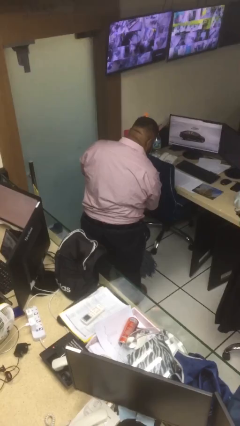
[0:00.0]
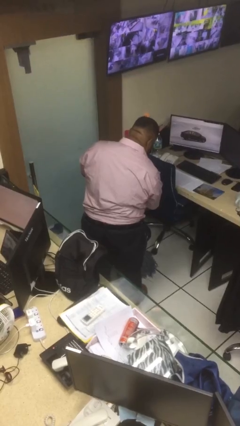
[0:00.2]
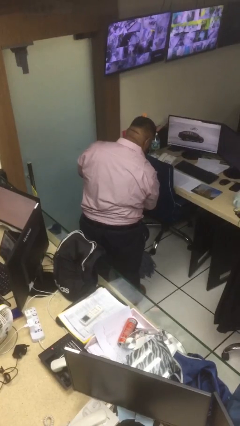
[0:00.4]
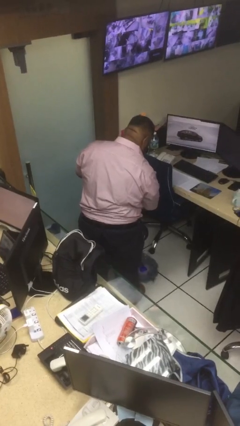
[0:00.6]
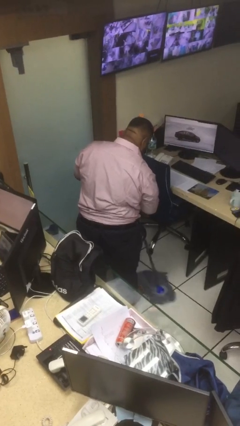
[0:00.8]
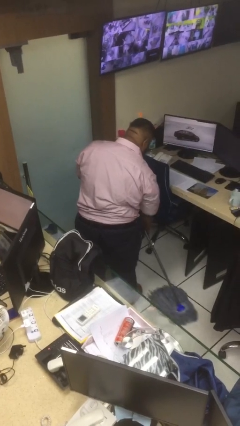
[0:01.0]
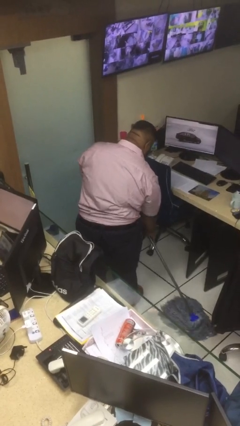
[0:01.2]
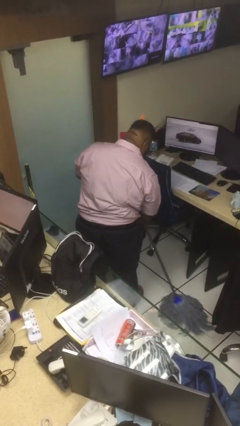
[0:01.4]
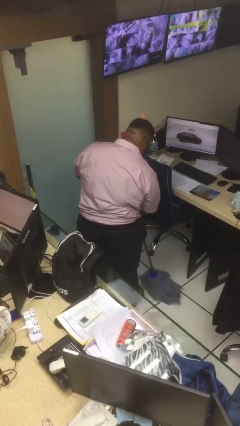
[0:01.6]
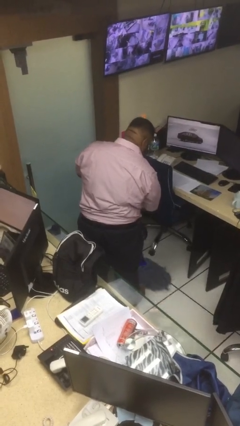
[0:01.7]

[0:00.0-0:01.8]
person mops

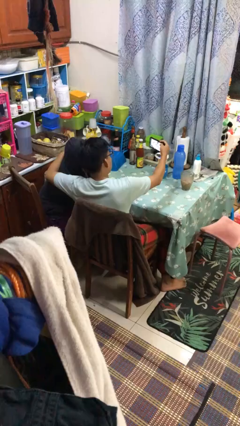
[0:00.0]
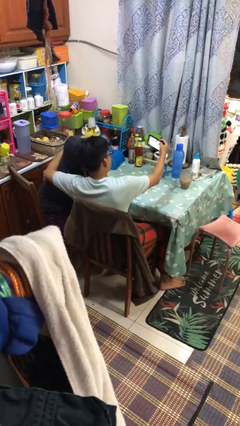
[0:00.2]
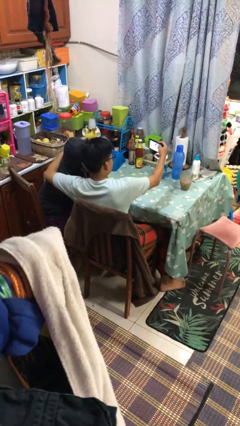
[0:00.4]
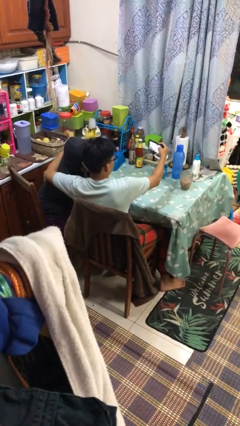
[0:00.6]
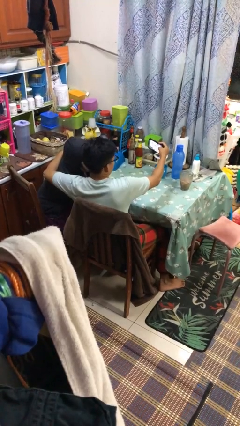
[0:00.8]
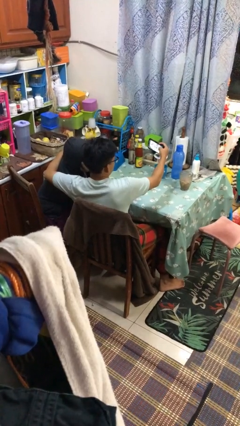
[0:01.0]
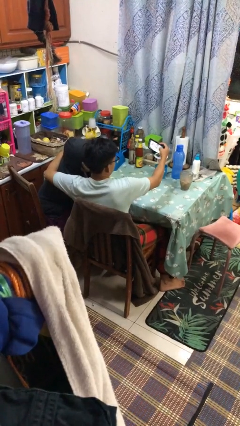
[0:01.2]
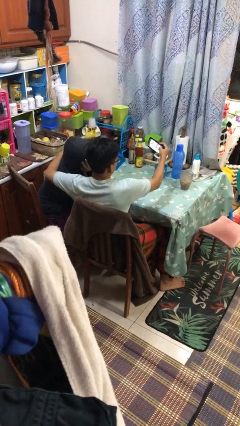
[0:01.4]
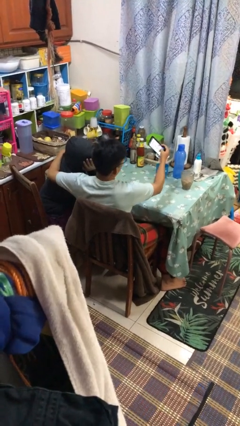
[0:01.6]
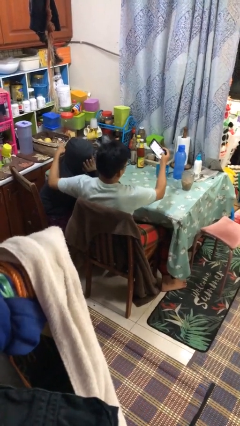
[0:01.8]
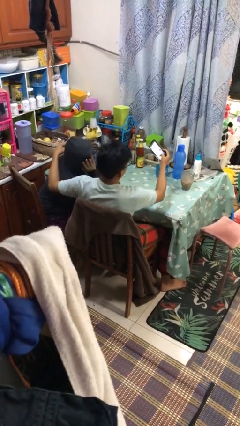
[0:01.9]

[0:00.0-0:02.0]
person takes selfie with person

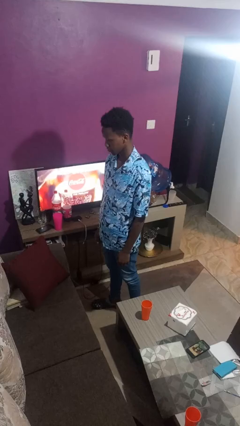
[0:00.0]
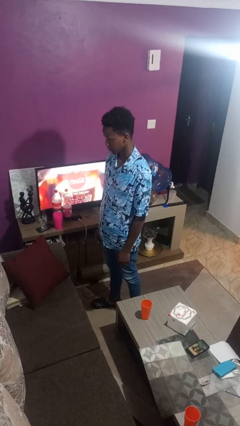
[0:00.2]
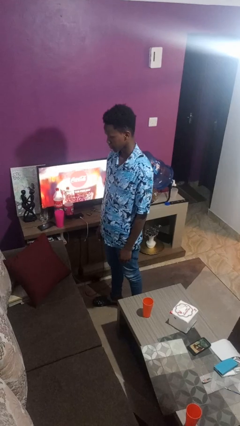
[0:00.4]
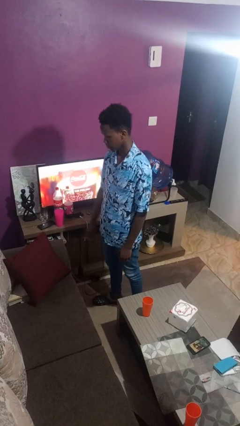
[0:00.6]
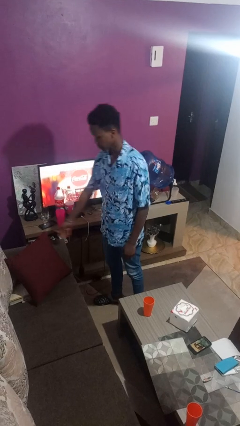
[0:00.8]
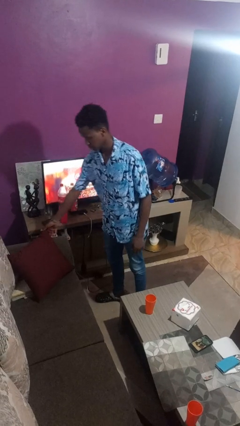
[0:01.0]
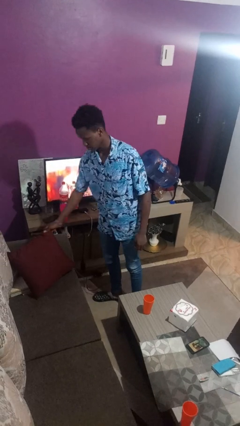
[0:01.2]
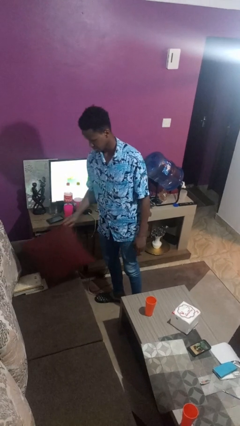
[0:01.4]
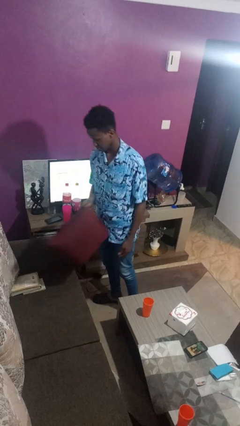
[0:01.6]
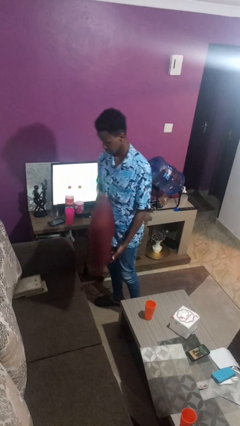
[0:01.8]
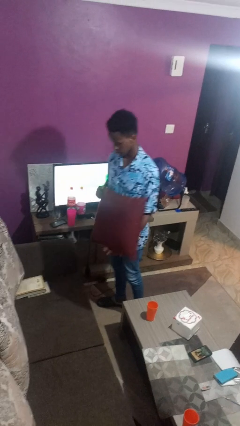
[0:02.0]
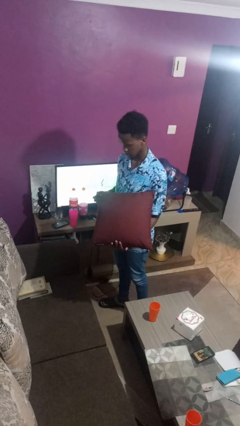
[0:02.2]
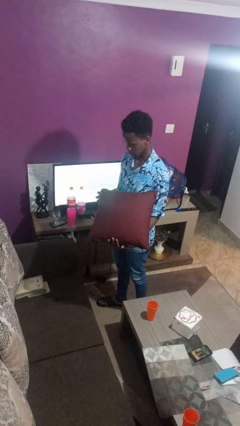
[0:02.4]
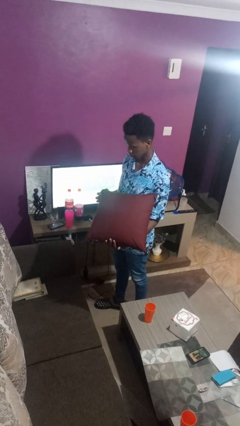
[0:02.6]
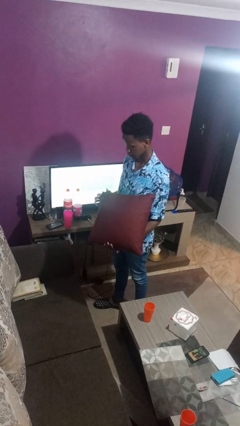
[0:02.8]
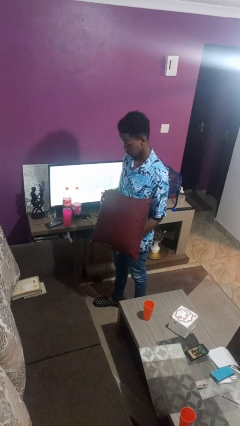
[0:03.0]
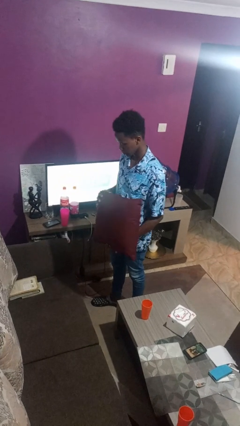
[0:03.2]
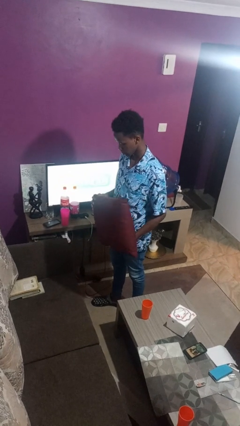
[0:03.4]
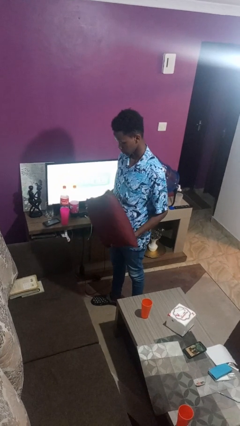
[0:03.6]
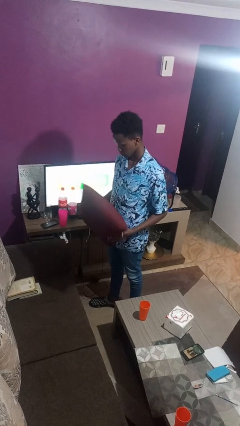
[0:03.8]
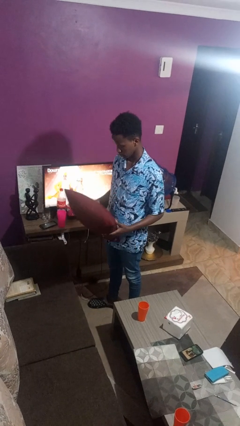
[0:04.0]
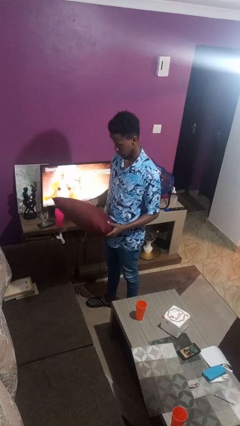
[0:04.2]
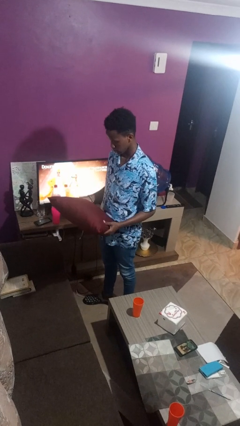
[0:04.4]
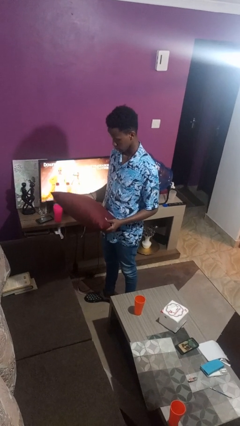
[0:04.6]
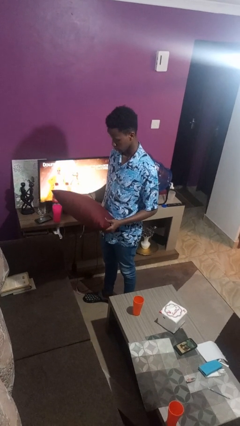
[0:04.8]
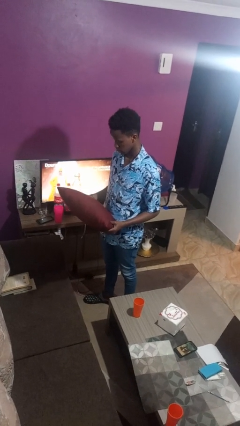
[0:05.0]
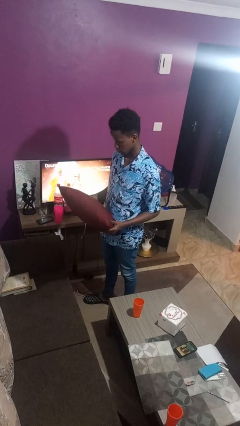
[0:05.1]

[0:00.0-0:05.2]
person picks up object from couch

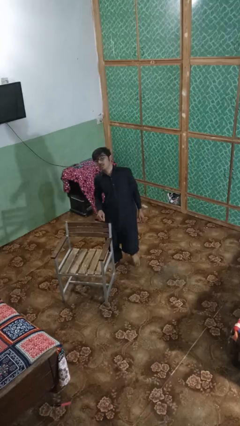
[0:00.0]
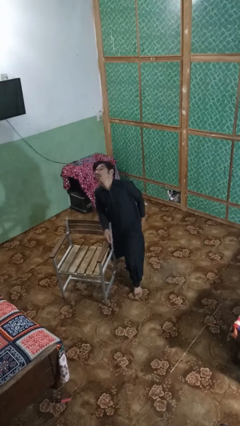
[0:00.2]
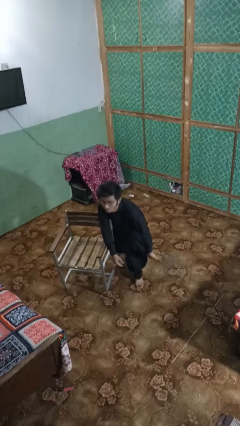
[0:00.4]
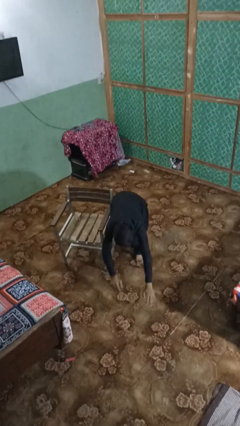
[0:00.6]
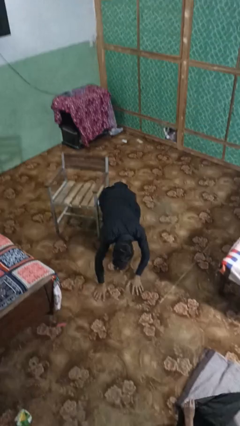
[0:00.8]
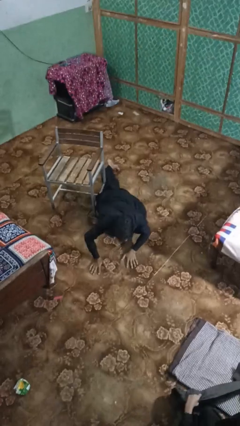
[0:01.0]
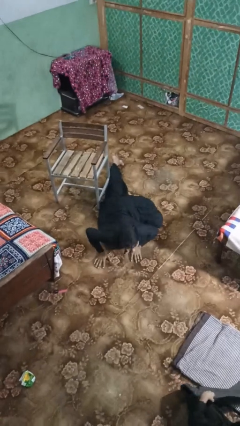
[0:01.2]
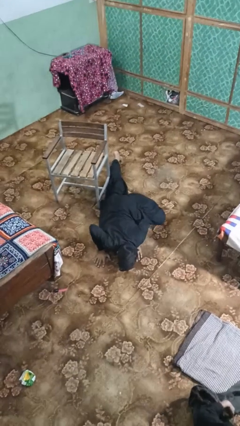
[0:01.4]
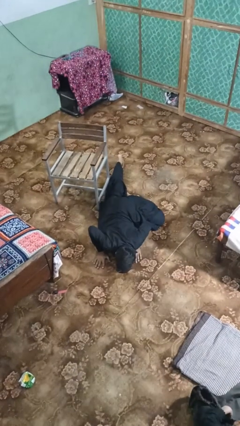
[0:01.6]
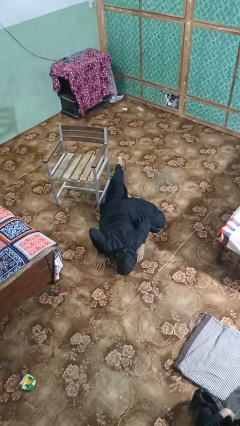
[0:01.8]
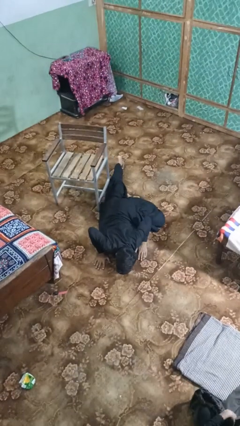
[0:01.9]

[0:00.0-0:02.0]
person lies down on floor

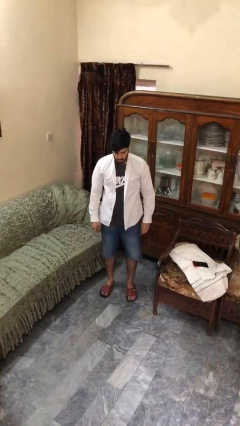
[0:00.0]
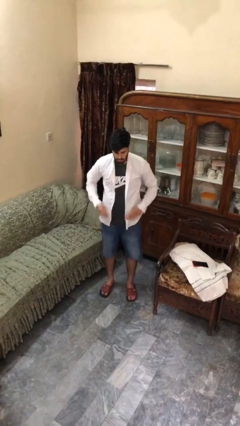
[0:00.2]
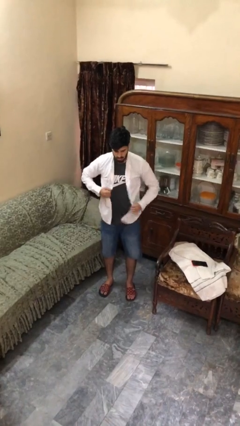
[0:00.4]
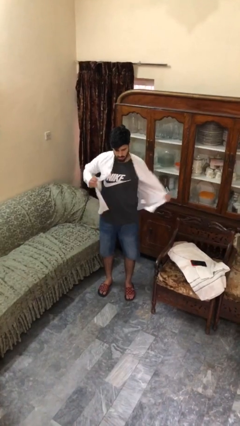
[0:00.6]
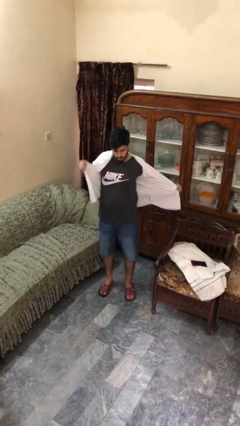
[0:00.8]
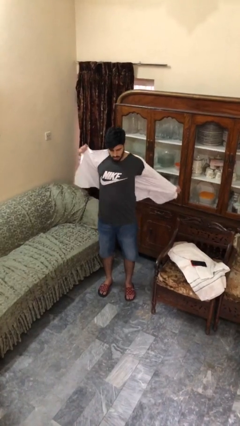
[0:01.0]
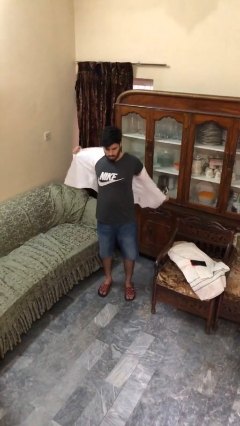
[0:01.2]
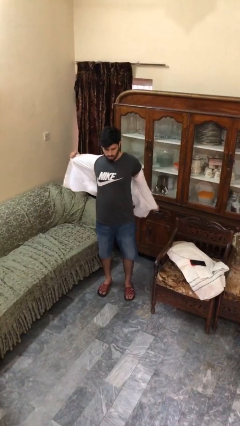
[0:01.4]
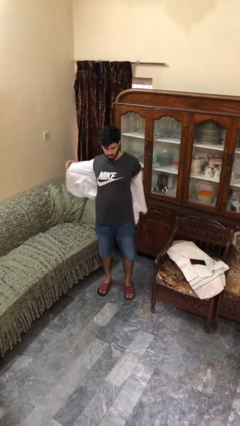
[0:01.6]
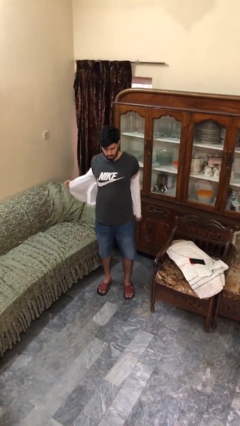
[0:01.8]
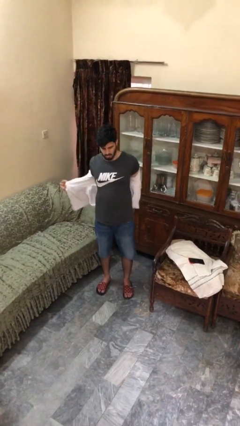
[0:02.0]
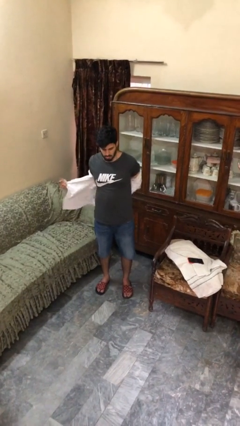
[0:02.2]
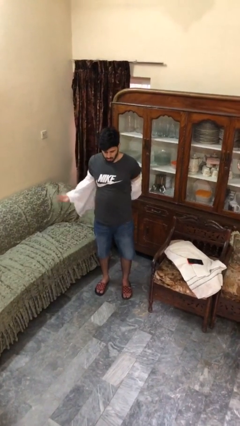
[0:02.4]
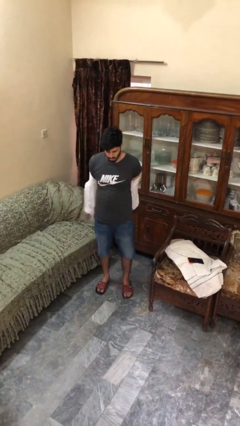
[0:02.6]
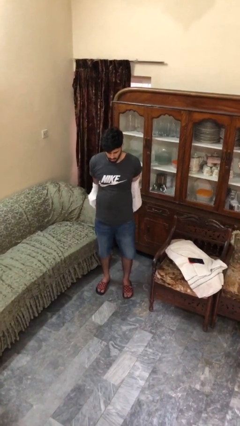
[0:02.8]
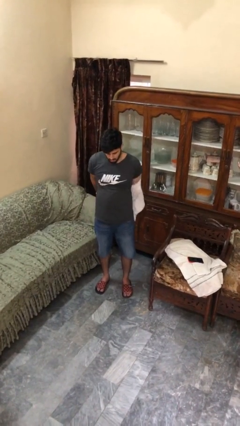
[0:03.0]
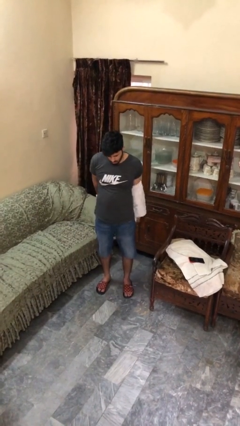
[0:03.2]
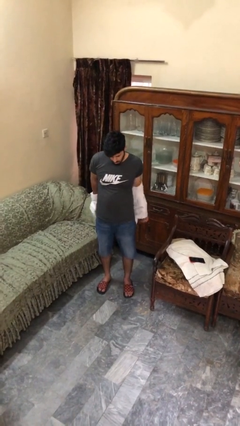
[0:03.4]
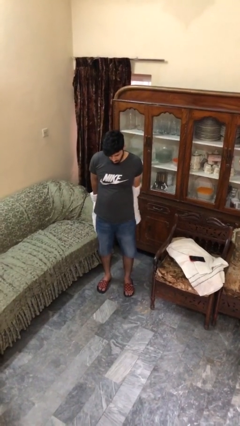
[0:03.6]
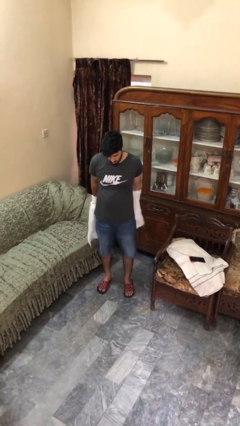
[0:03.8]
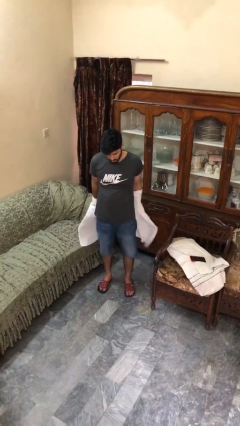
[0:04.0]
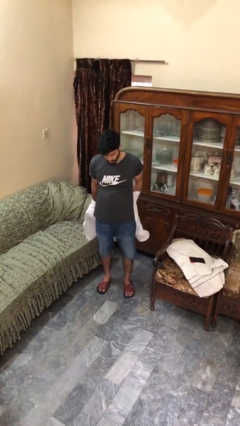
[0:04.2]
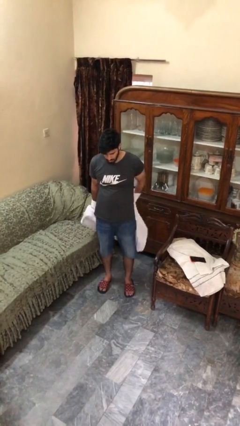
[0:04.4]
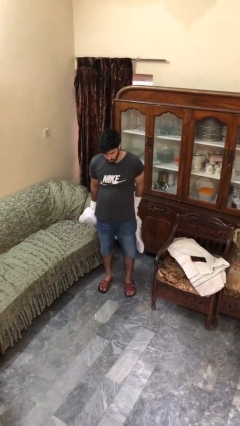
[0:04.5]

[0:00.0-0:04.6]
person takes off shirt

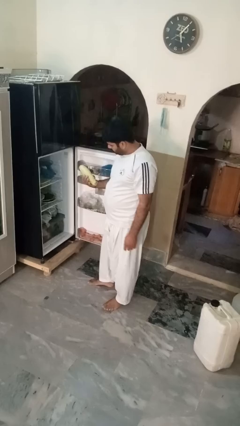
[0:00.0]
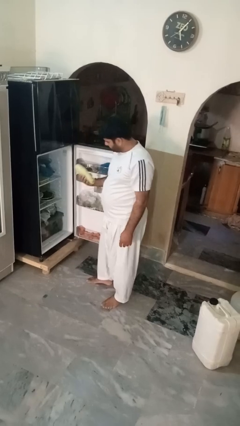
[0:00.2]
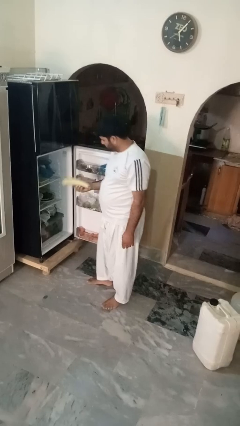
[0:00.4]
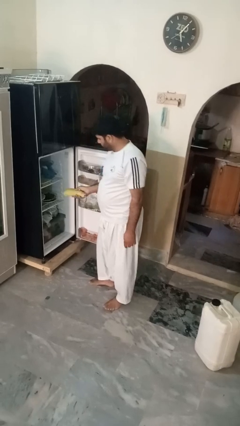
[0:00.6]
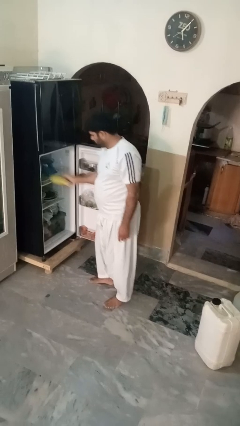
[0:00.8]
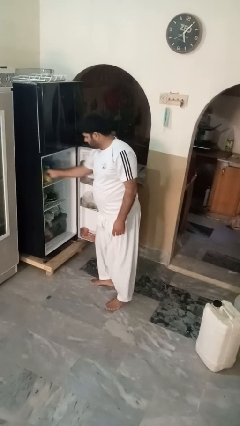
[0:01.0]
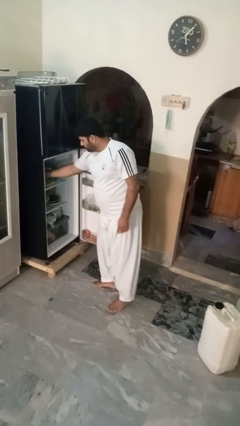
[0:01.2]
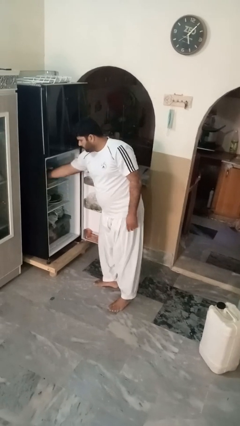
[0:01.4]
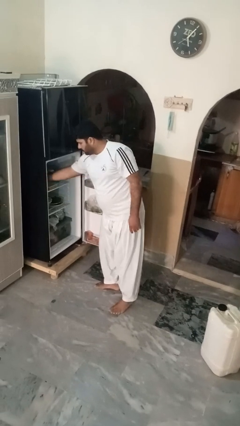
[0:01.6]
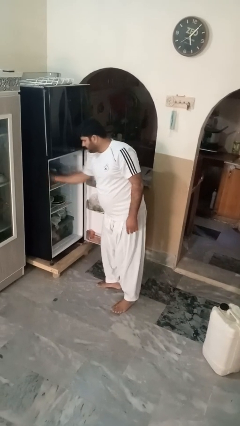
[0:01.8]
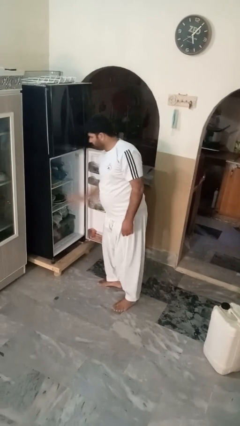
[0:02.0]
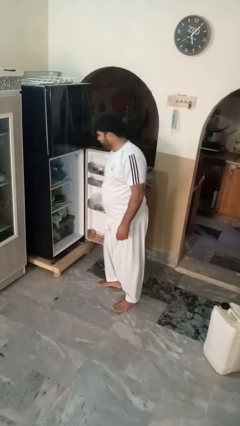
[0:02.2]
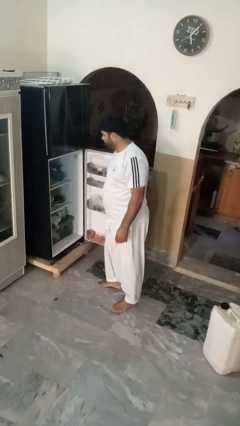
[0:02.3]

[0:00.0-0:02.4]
person puts object into refrigerator
